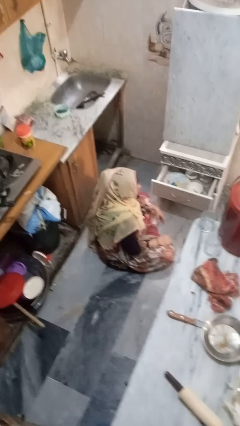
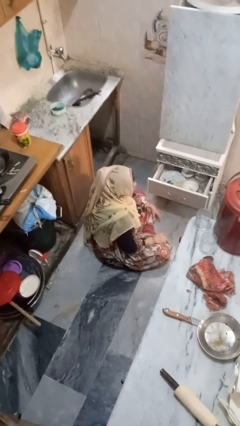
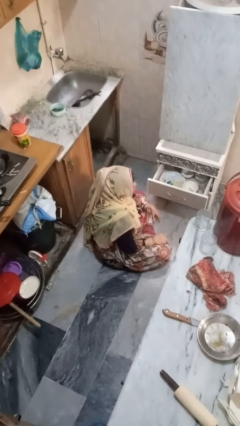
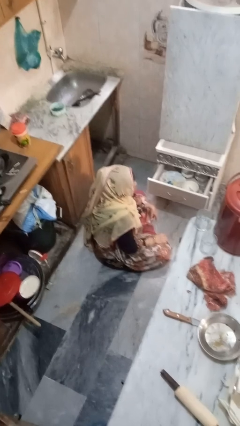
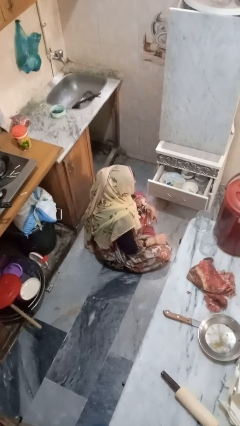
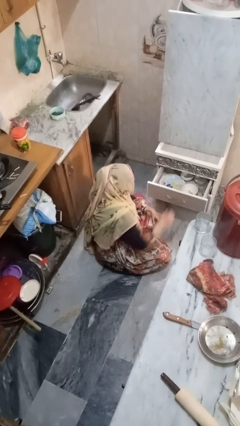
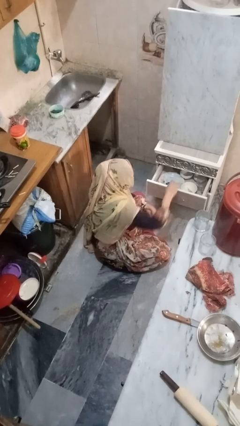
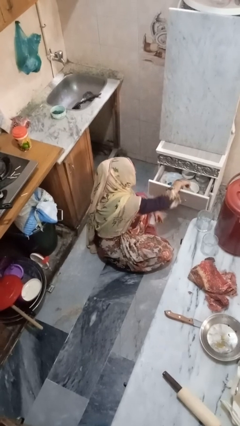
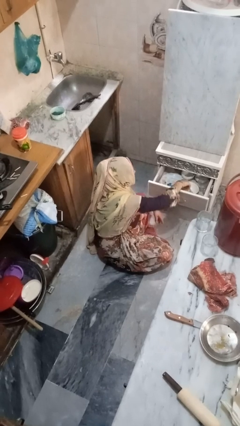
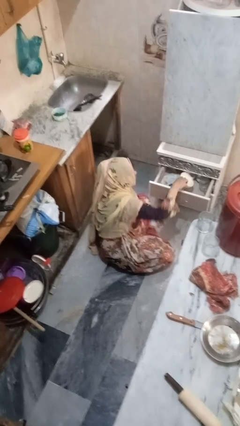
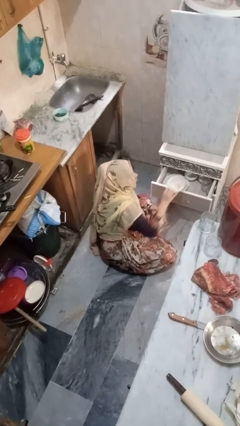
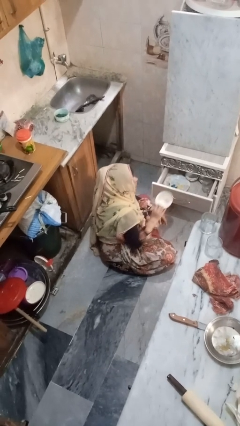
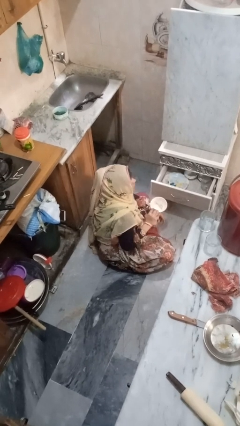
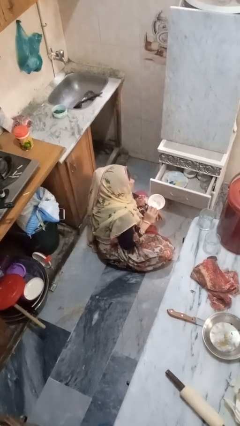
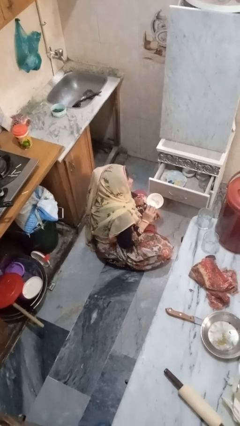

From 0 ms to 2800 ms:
person takes object from kitchen drawer

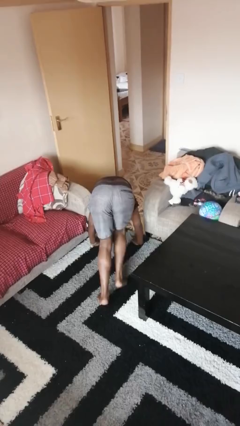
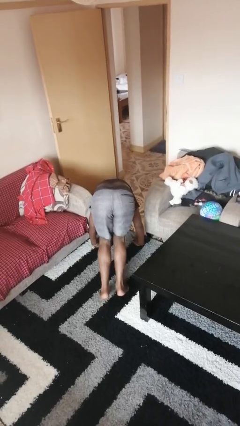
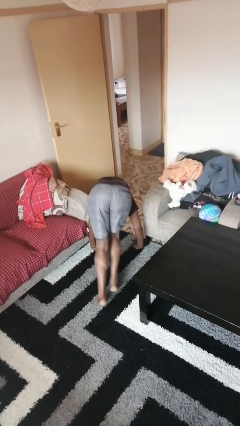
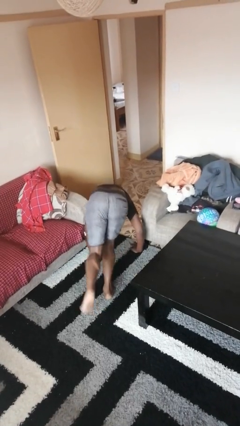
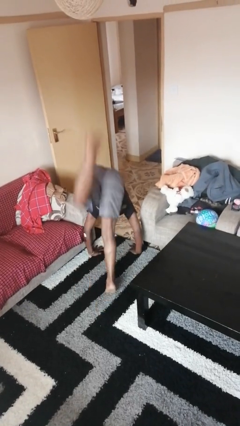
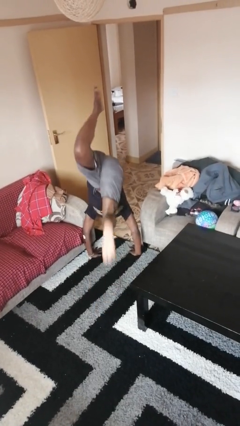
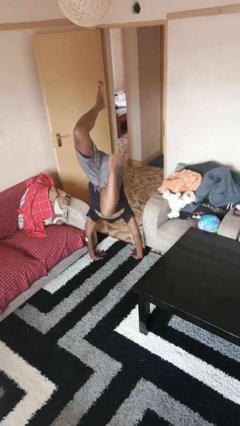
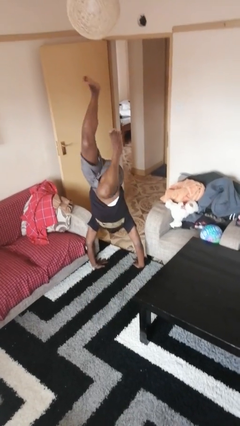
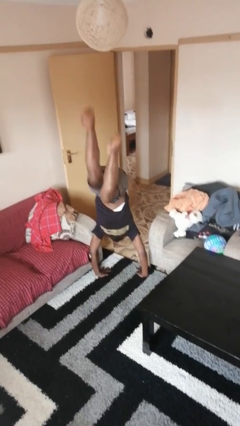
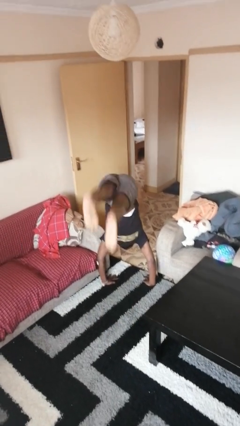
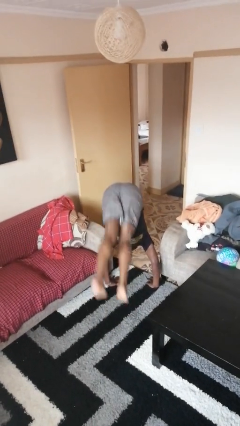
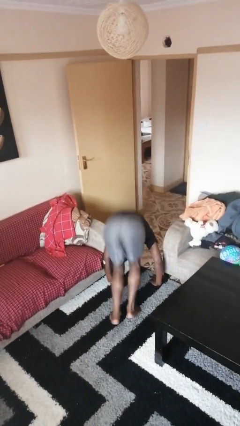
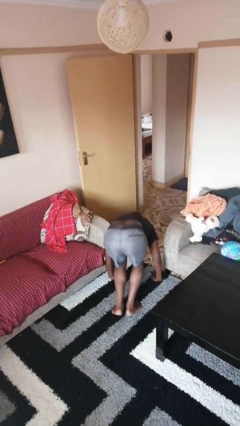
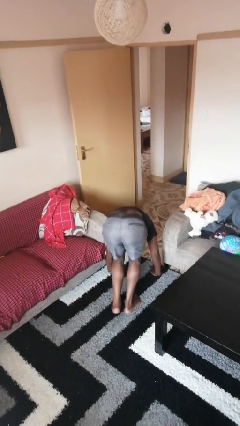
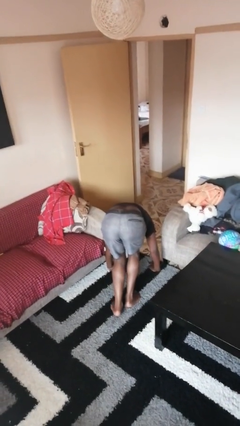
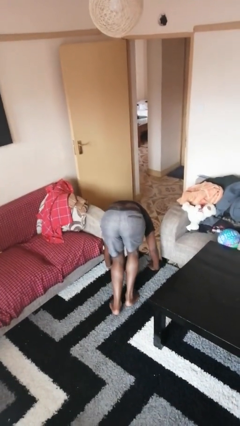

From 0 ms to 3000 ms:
person handstand

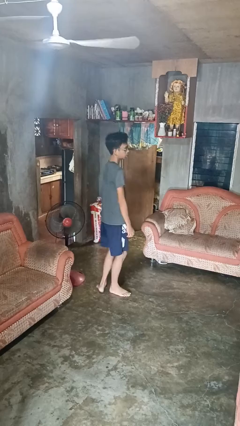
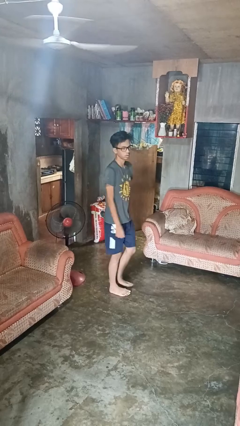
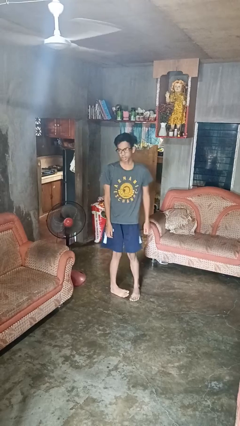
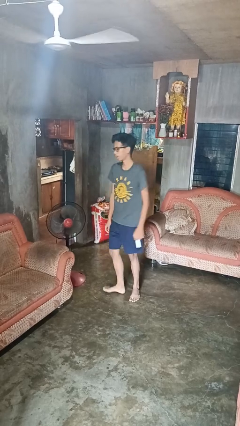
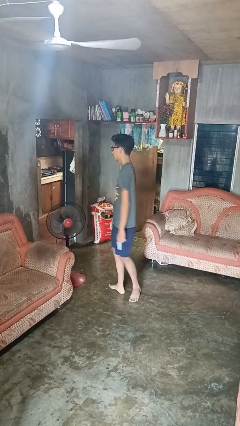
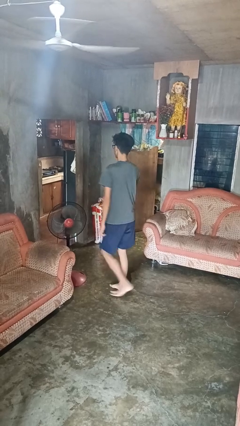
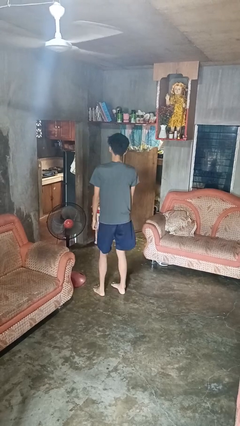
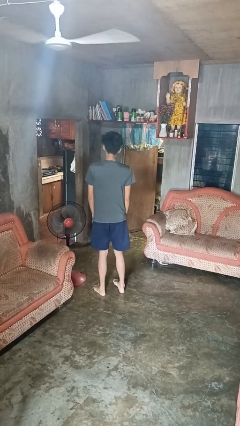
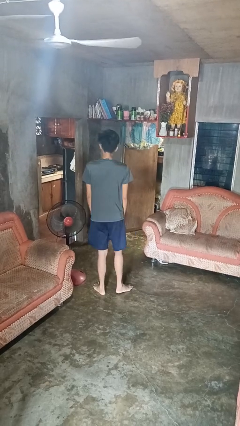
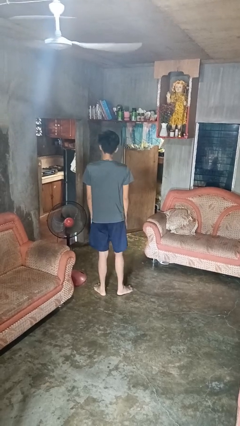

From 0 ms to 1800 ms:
person twirls

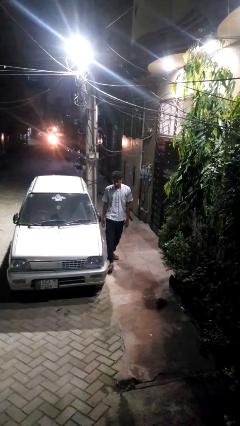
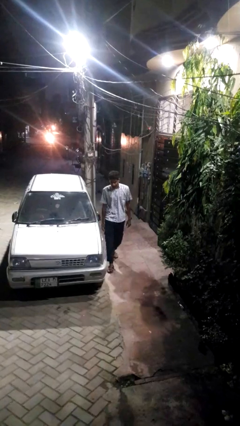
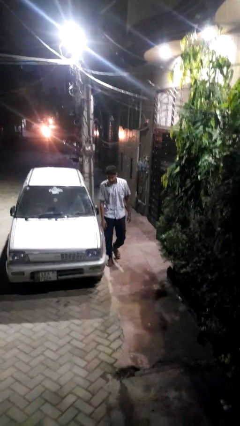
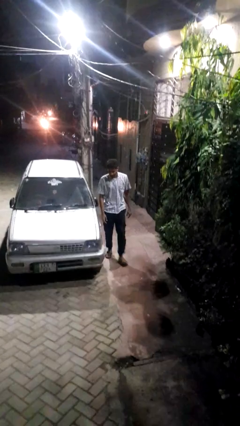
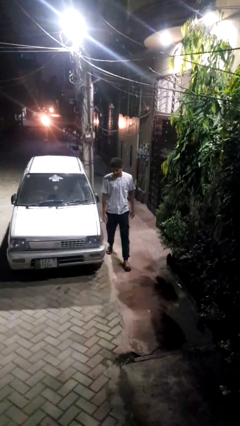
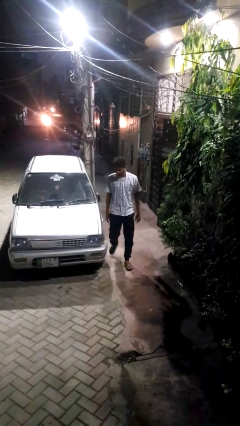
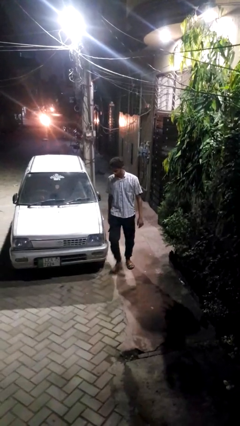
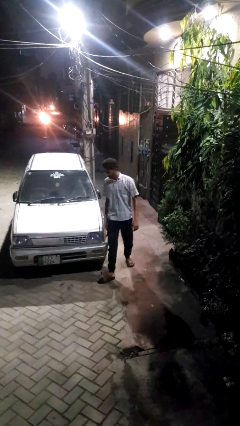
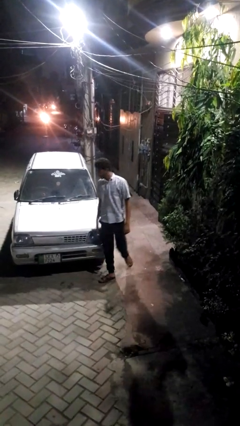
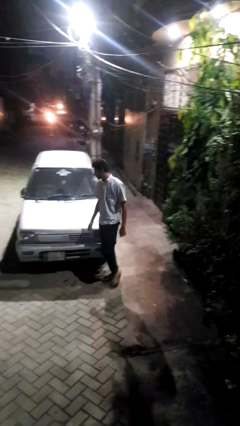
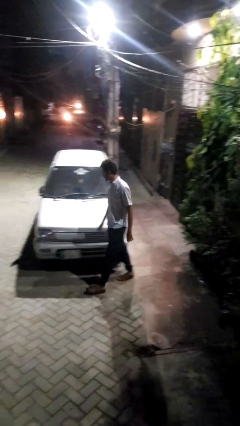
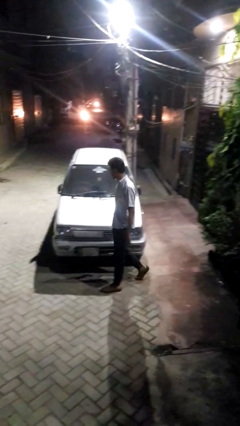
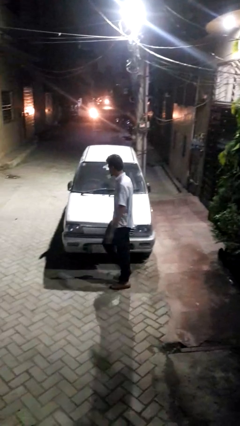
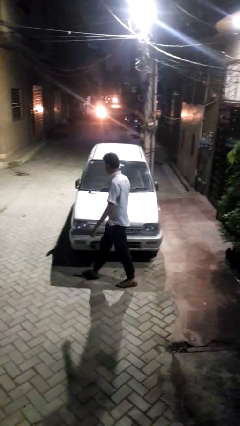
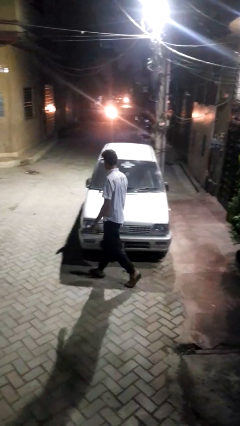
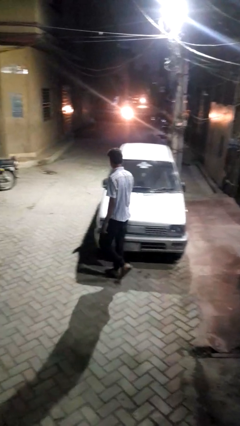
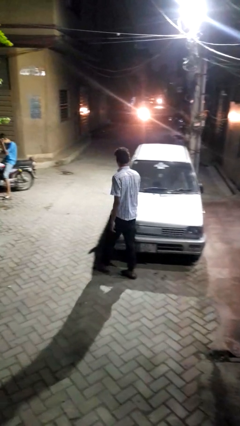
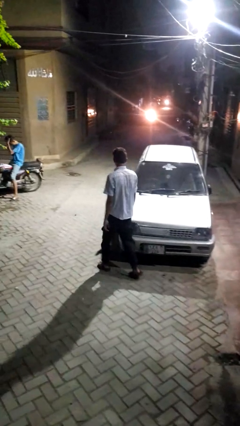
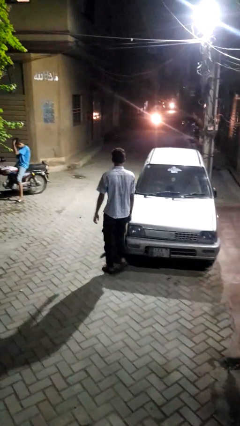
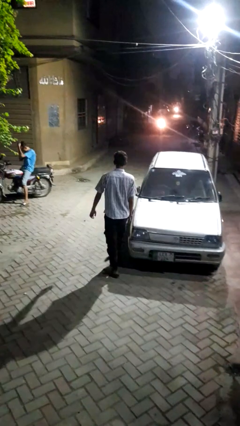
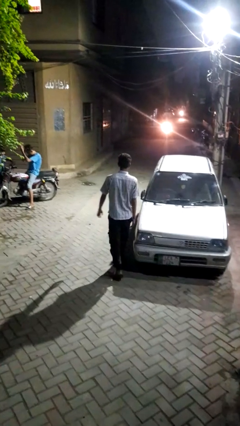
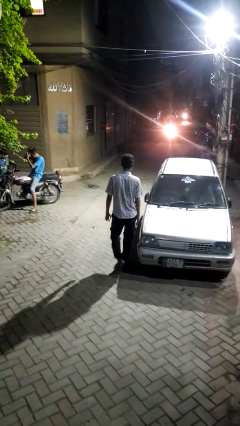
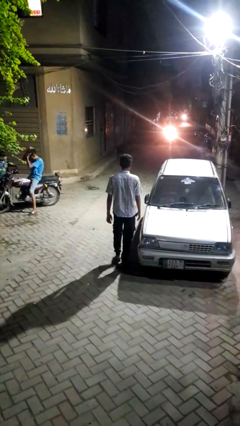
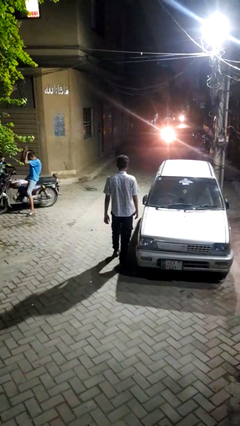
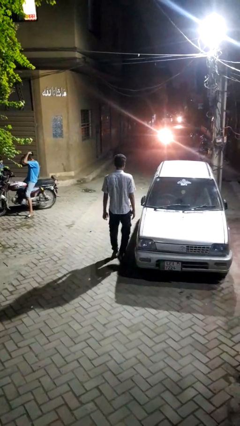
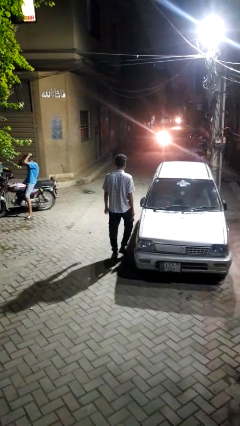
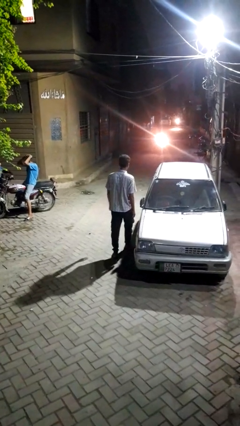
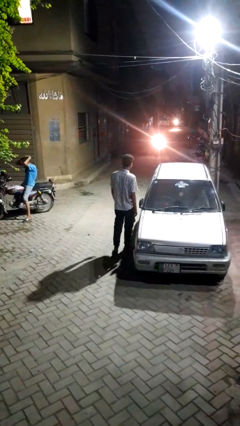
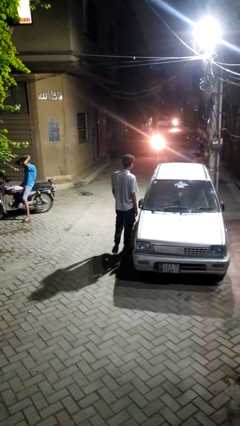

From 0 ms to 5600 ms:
person walks around car

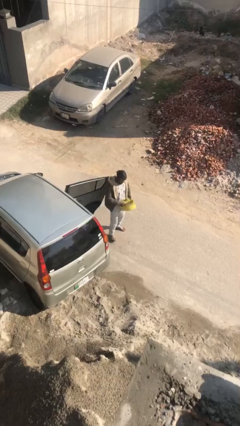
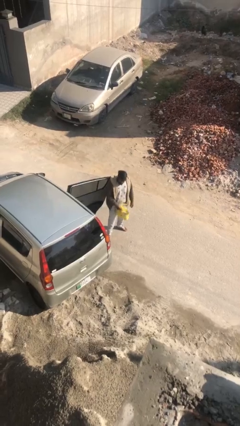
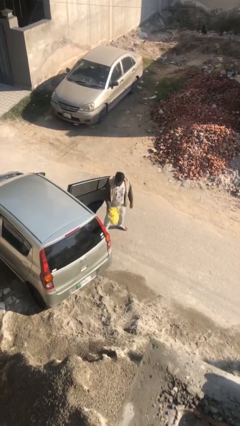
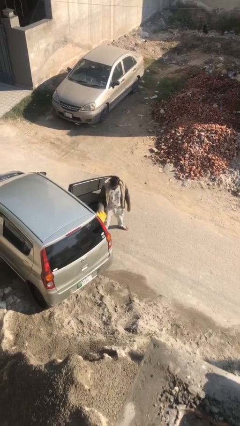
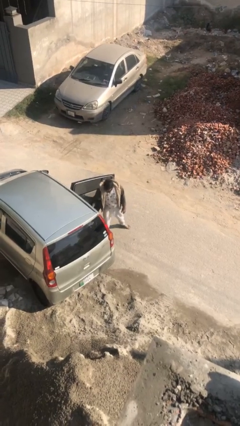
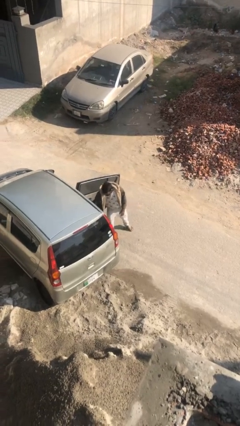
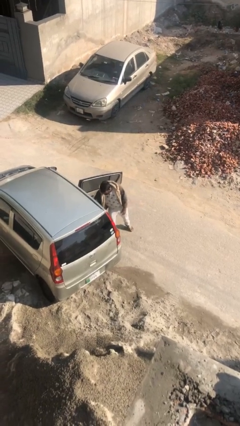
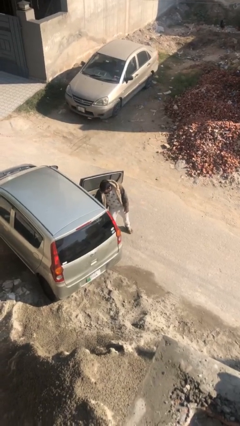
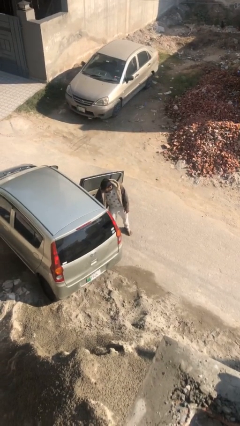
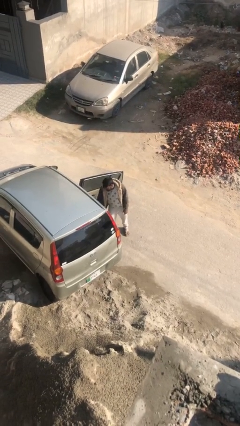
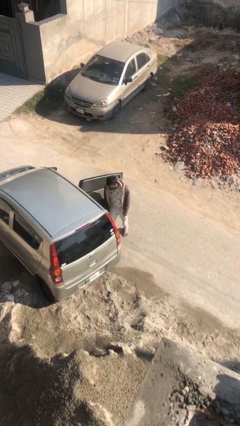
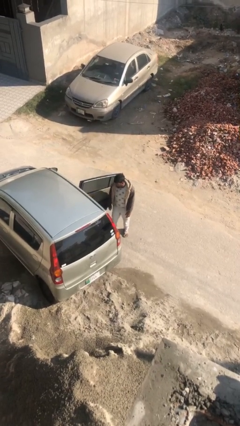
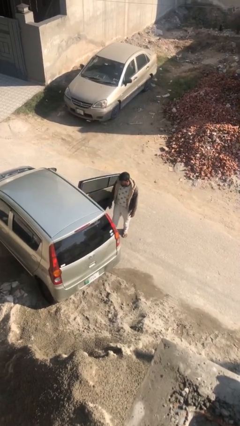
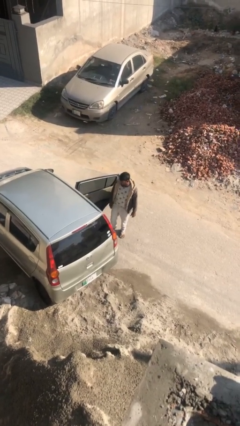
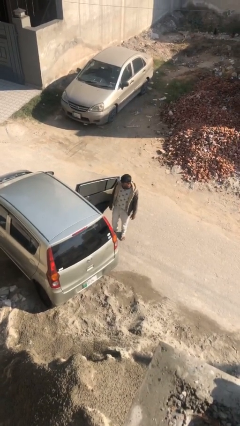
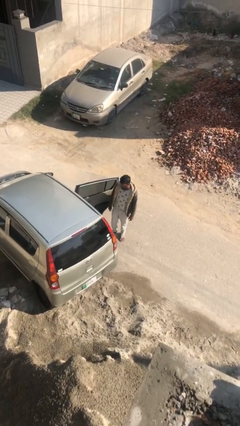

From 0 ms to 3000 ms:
person loads car

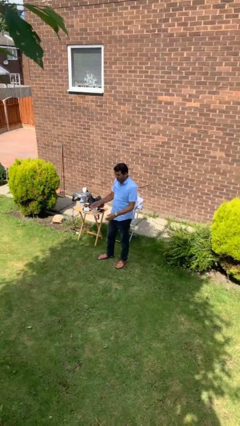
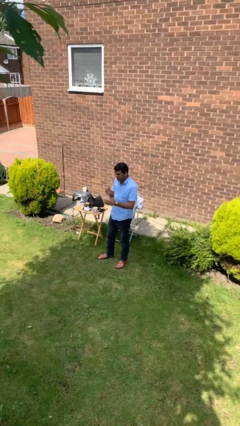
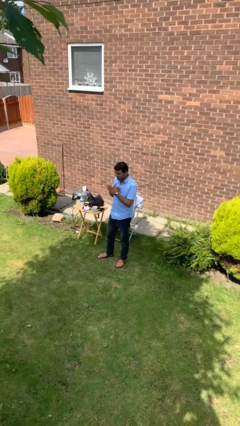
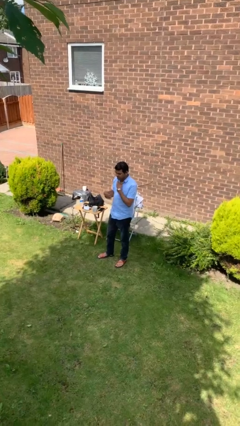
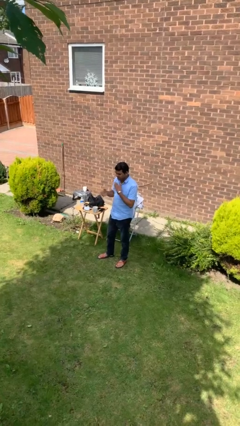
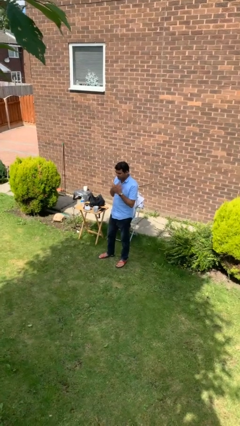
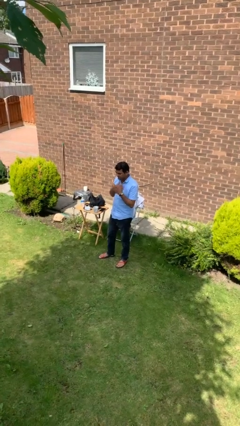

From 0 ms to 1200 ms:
person drums on chest
